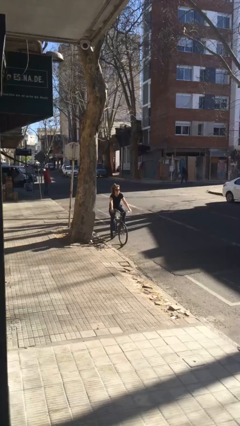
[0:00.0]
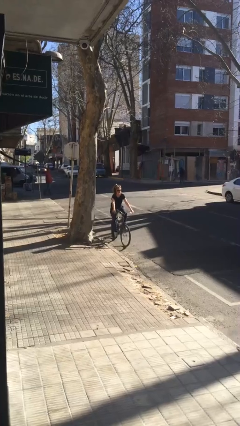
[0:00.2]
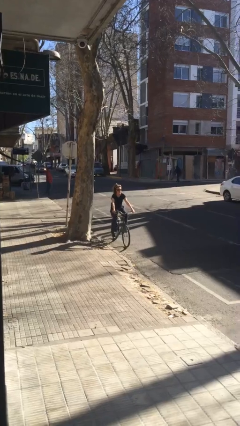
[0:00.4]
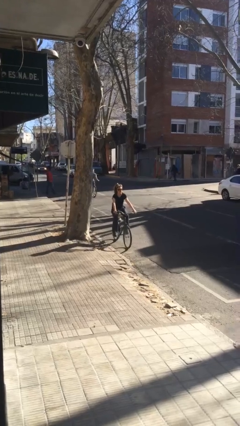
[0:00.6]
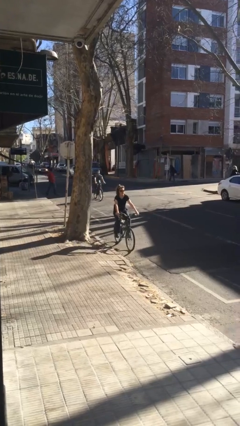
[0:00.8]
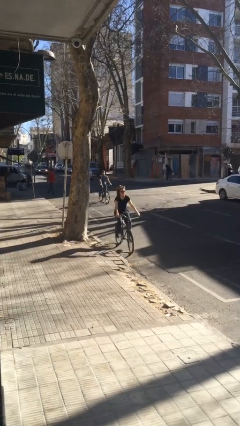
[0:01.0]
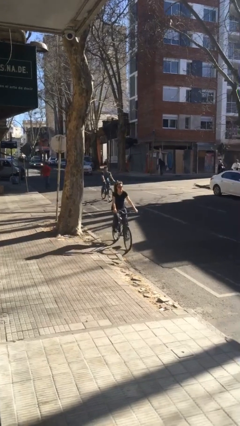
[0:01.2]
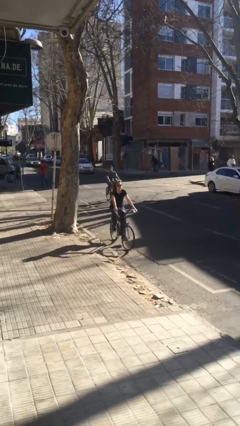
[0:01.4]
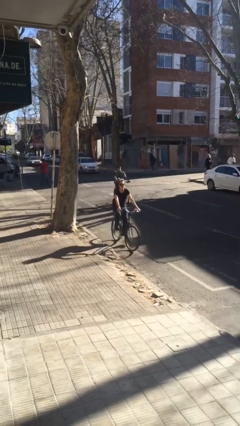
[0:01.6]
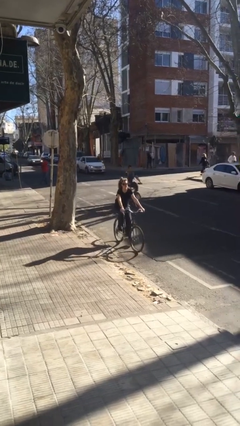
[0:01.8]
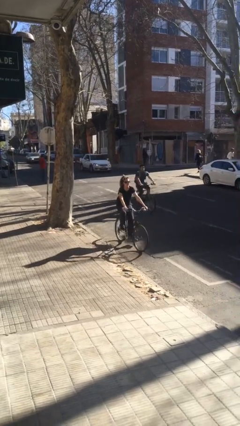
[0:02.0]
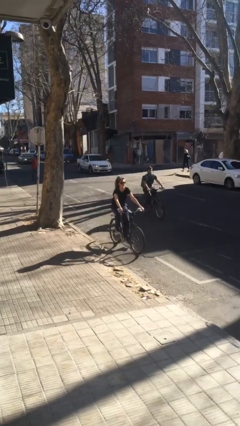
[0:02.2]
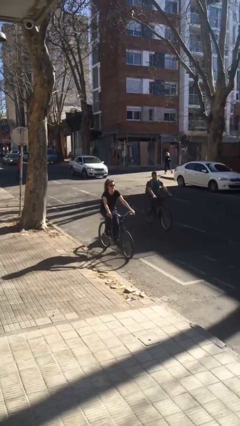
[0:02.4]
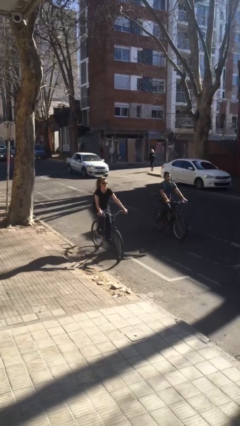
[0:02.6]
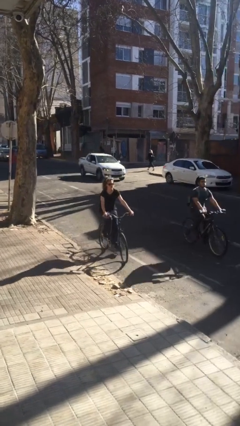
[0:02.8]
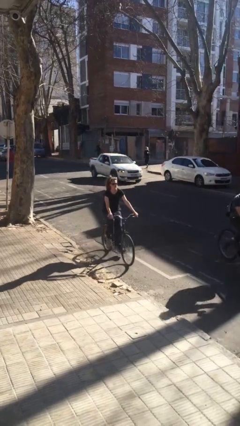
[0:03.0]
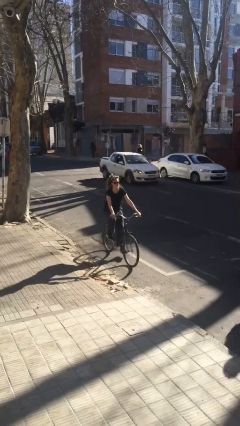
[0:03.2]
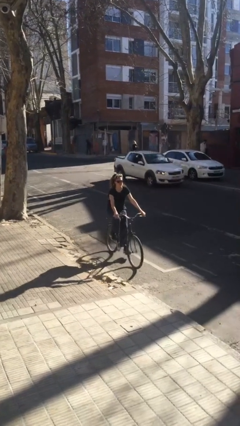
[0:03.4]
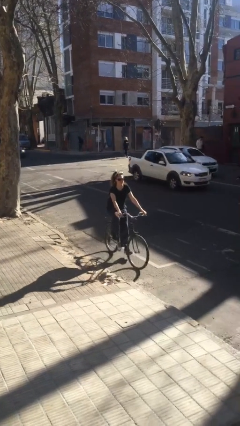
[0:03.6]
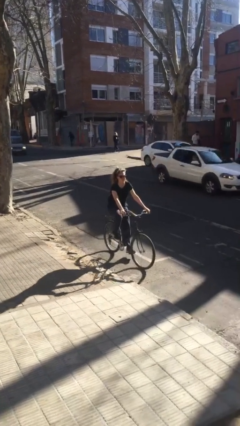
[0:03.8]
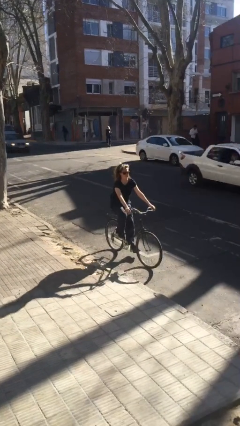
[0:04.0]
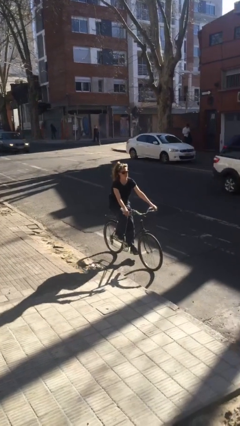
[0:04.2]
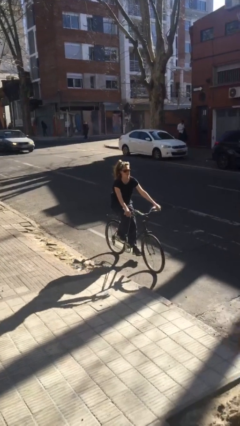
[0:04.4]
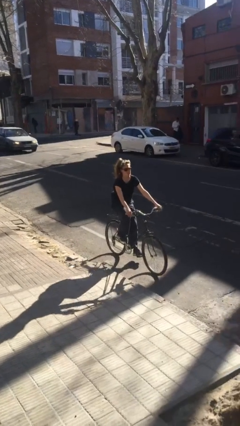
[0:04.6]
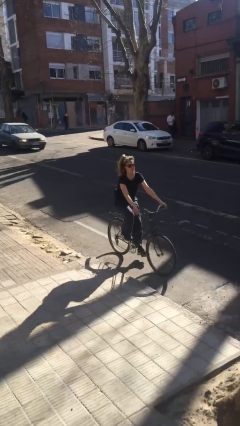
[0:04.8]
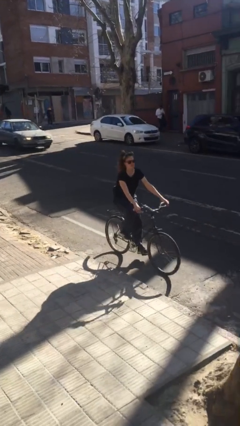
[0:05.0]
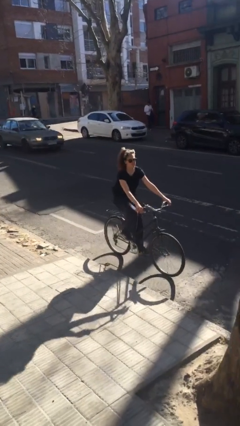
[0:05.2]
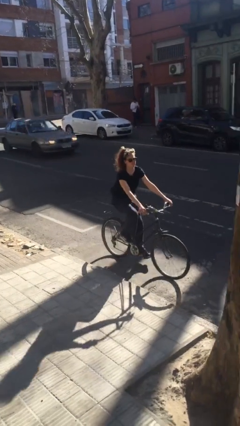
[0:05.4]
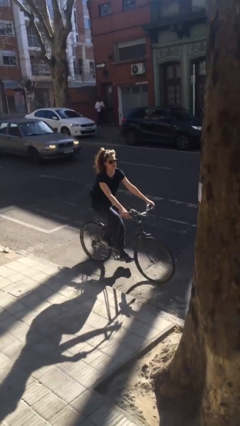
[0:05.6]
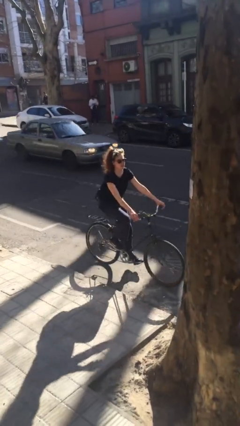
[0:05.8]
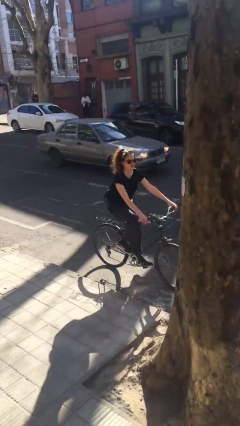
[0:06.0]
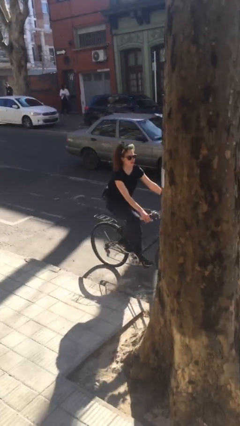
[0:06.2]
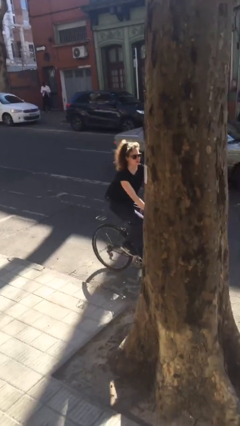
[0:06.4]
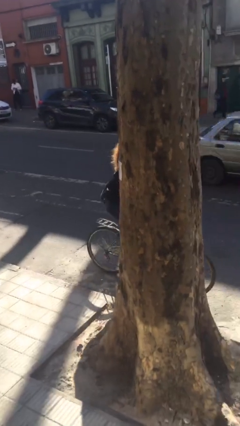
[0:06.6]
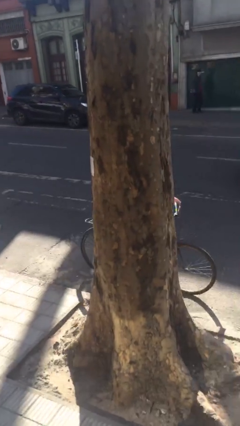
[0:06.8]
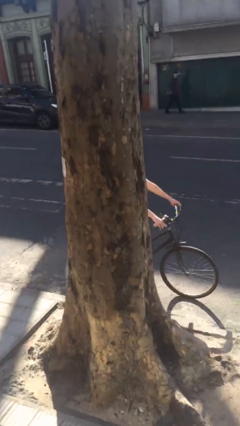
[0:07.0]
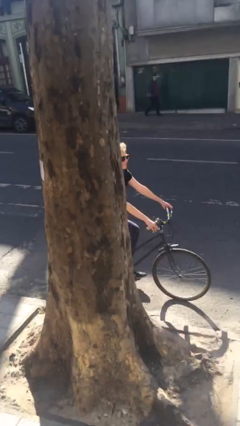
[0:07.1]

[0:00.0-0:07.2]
person rides bicycle

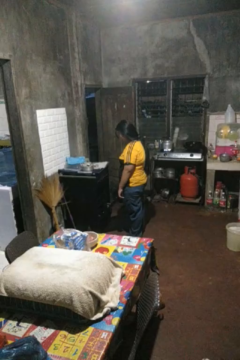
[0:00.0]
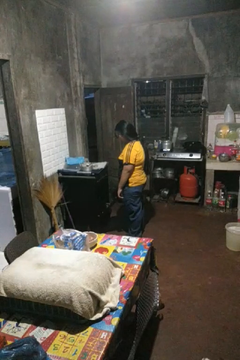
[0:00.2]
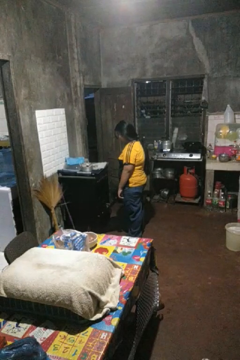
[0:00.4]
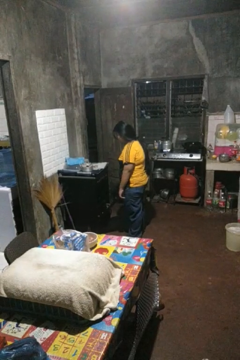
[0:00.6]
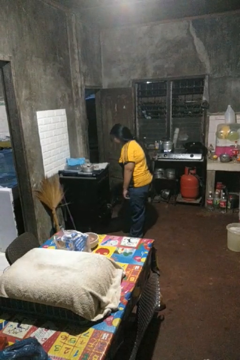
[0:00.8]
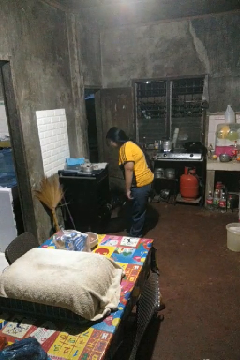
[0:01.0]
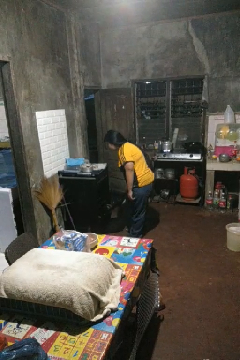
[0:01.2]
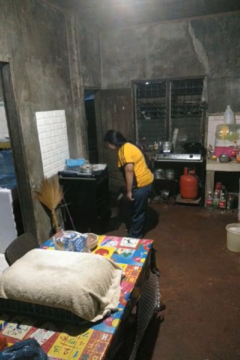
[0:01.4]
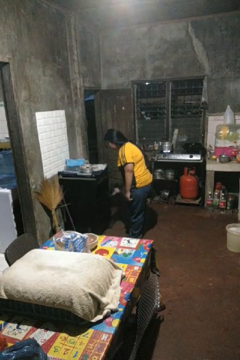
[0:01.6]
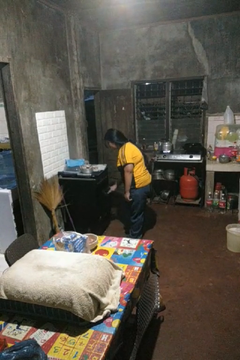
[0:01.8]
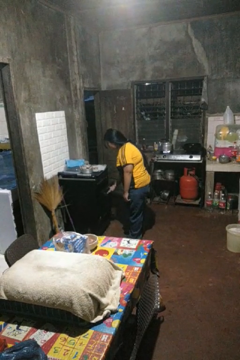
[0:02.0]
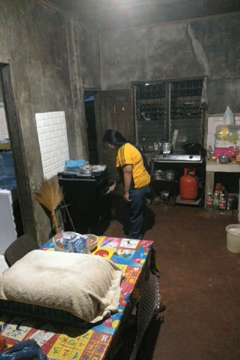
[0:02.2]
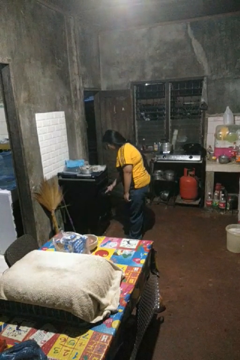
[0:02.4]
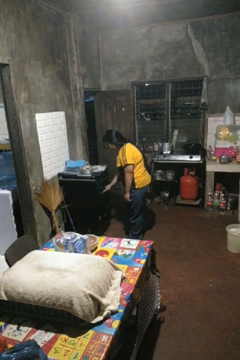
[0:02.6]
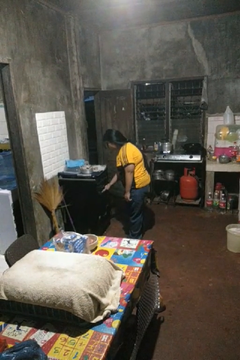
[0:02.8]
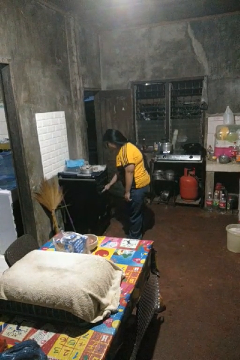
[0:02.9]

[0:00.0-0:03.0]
person closes oven door

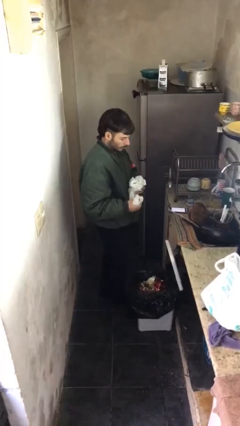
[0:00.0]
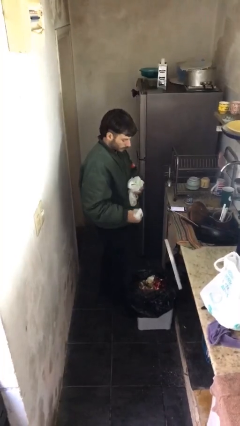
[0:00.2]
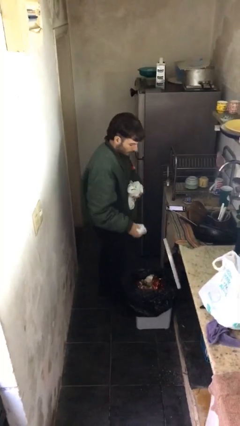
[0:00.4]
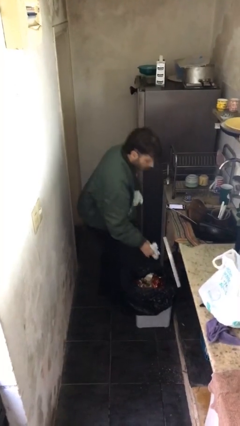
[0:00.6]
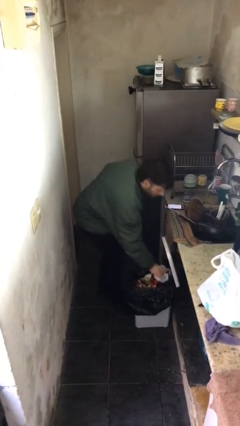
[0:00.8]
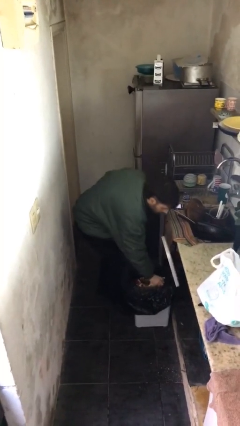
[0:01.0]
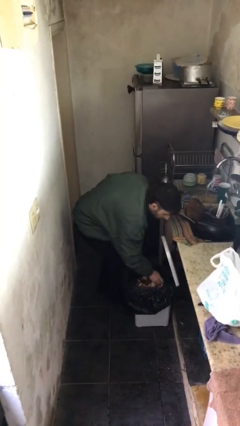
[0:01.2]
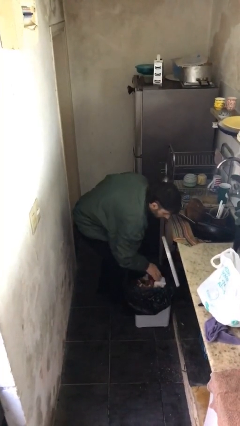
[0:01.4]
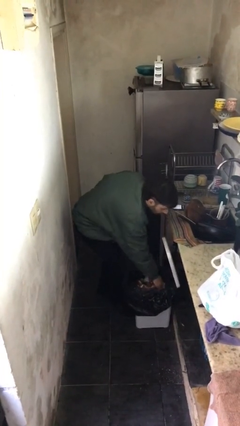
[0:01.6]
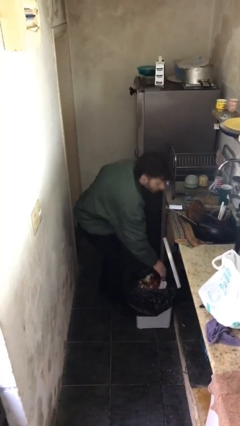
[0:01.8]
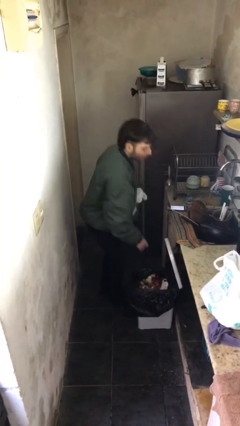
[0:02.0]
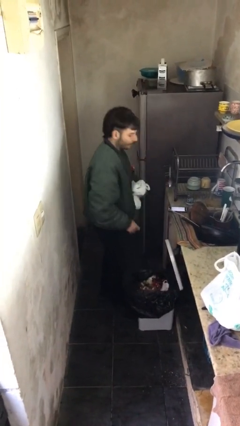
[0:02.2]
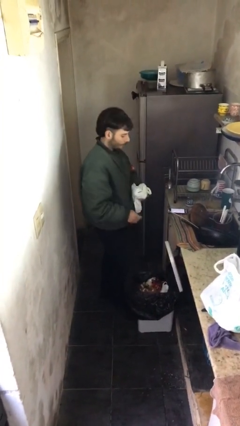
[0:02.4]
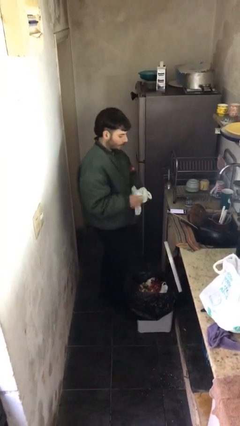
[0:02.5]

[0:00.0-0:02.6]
person discards trash

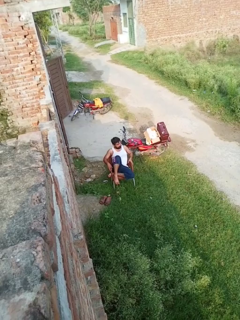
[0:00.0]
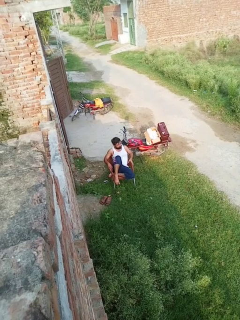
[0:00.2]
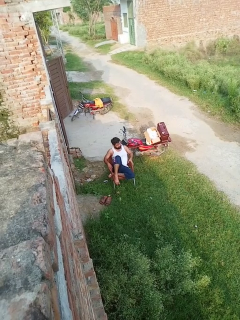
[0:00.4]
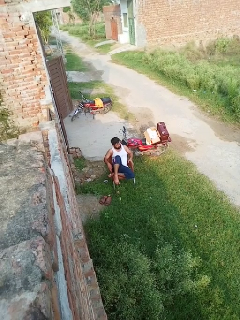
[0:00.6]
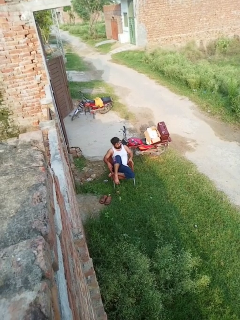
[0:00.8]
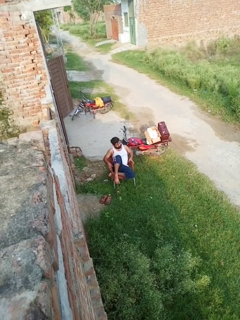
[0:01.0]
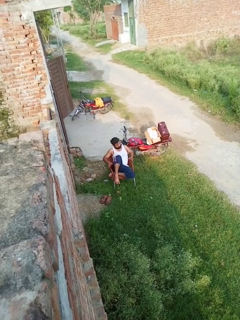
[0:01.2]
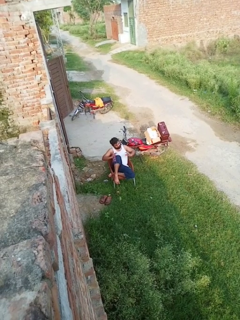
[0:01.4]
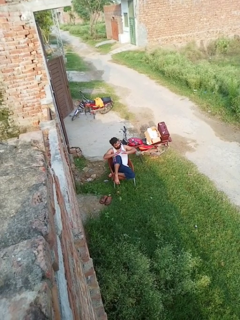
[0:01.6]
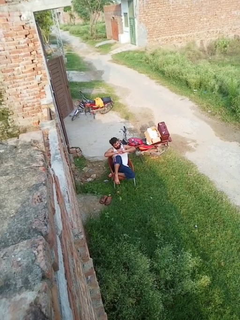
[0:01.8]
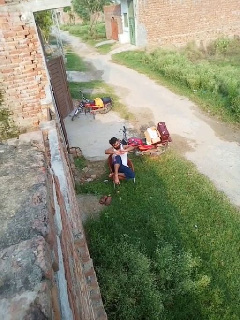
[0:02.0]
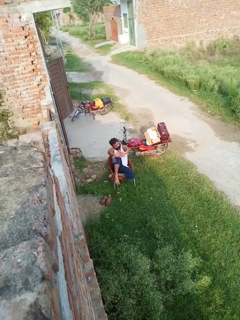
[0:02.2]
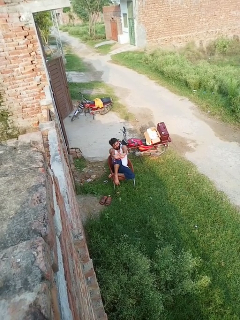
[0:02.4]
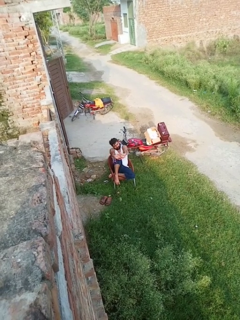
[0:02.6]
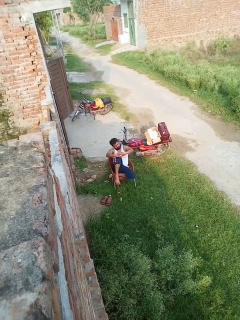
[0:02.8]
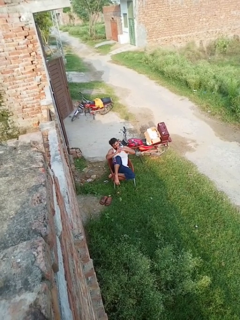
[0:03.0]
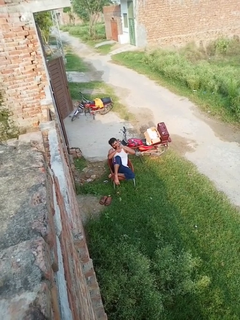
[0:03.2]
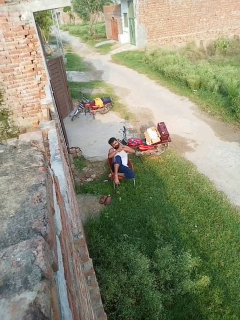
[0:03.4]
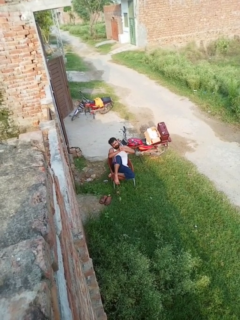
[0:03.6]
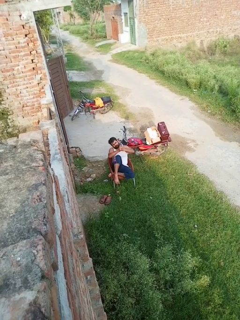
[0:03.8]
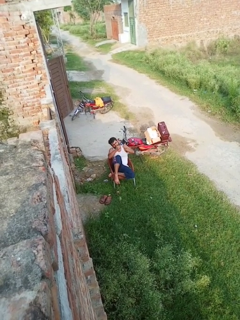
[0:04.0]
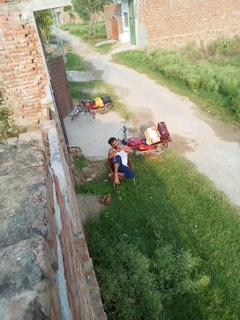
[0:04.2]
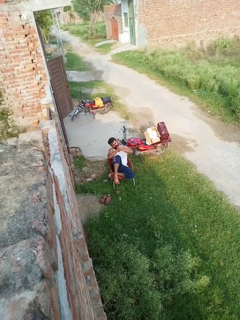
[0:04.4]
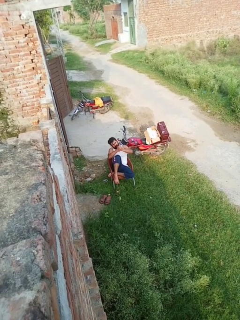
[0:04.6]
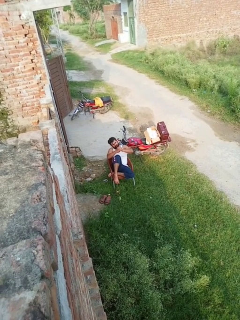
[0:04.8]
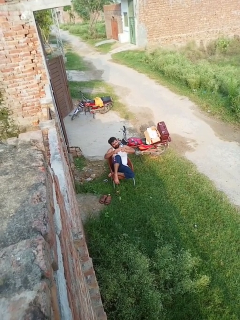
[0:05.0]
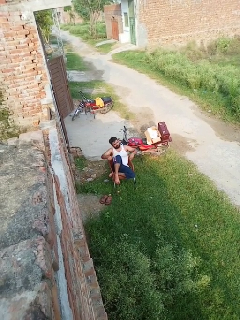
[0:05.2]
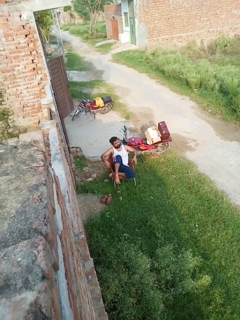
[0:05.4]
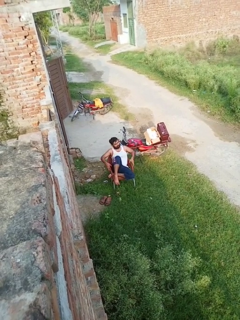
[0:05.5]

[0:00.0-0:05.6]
person cracks knuckles

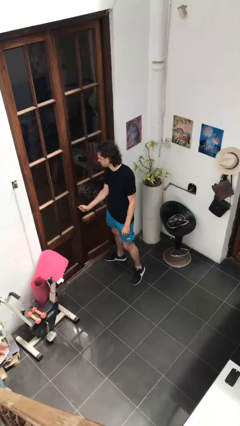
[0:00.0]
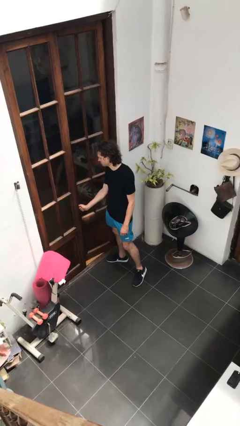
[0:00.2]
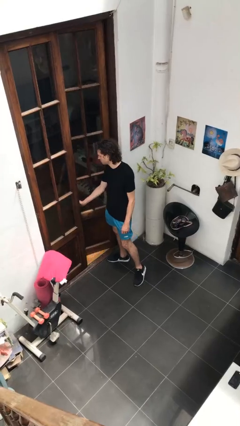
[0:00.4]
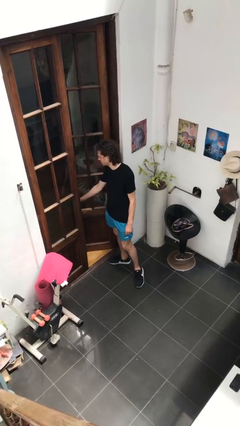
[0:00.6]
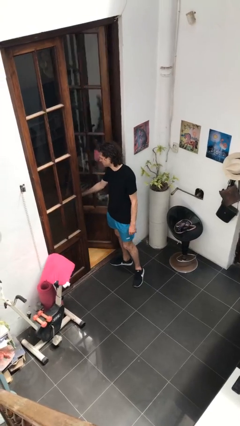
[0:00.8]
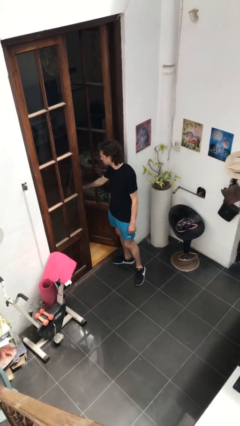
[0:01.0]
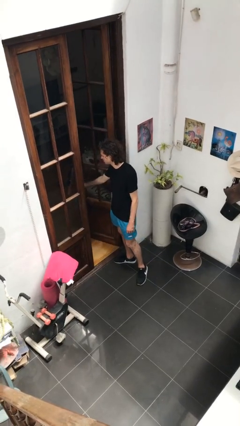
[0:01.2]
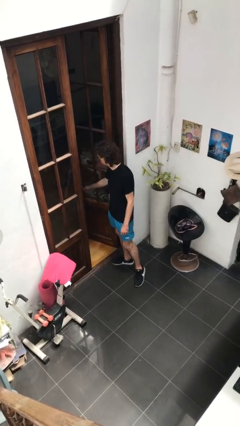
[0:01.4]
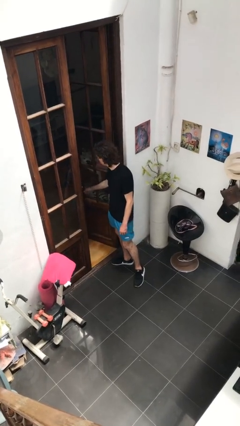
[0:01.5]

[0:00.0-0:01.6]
person opens facility door
